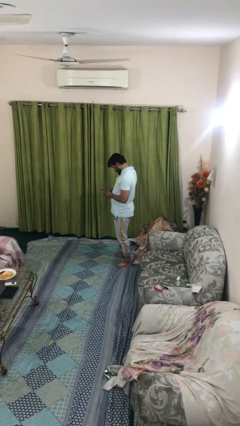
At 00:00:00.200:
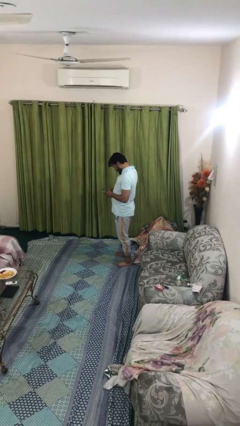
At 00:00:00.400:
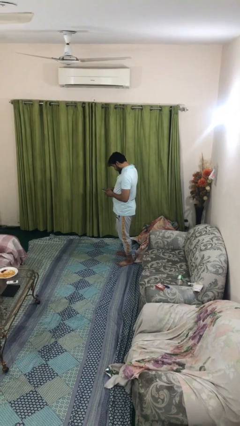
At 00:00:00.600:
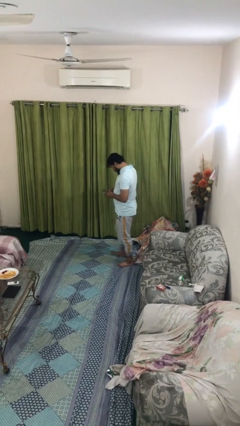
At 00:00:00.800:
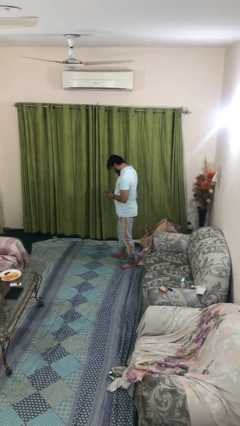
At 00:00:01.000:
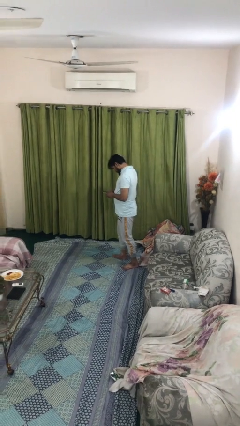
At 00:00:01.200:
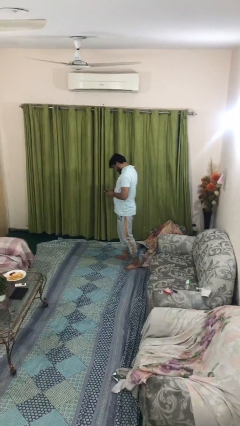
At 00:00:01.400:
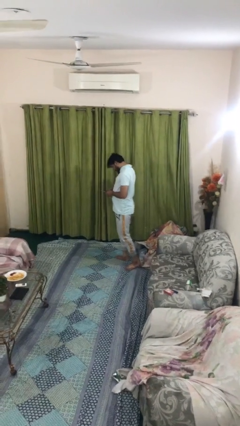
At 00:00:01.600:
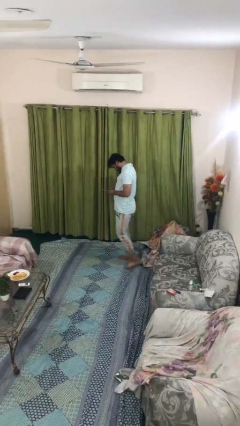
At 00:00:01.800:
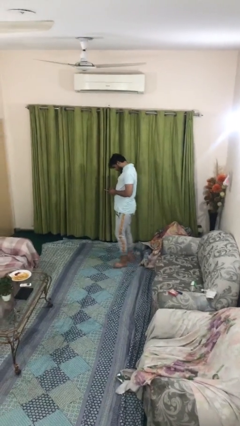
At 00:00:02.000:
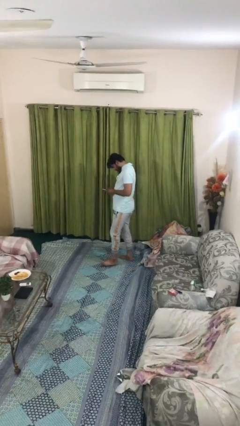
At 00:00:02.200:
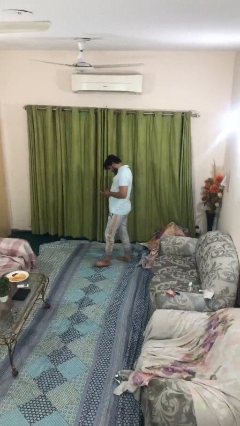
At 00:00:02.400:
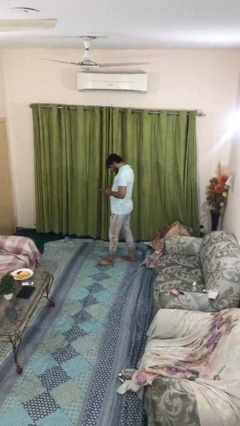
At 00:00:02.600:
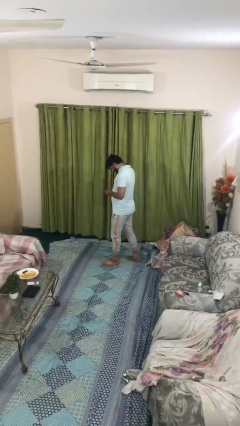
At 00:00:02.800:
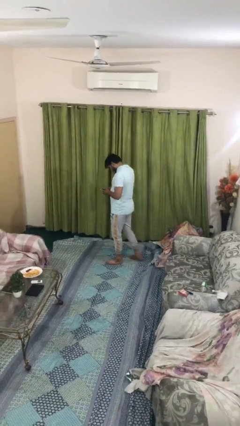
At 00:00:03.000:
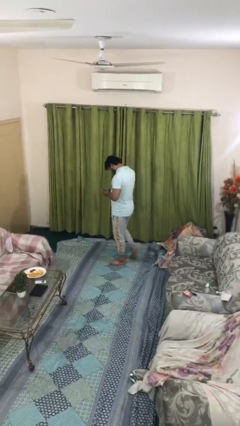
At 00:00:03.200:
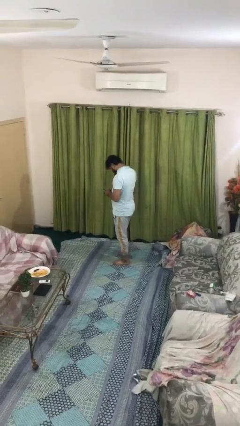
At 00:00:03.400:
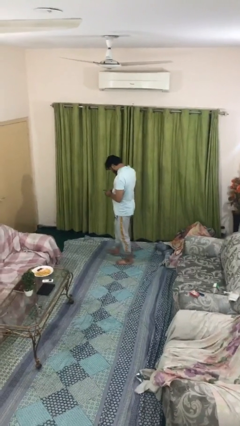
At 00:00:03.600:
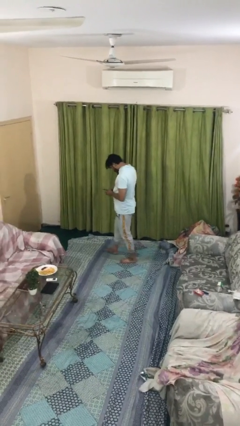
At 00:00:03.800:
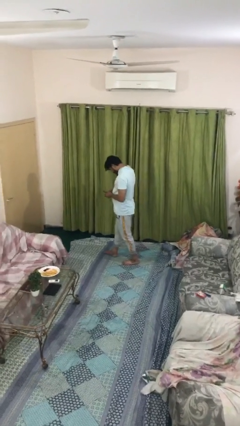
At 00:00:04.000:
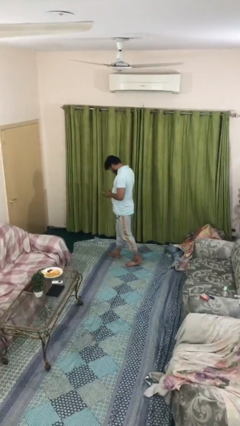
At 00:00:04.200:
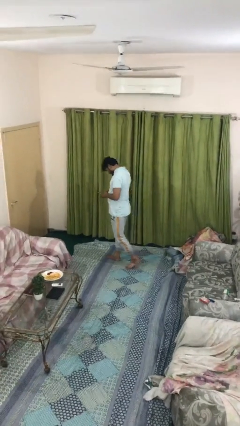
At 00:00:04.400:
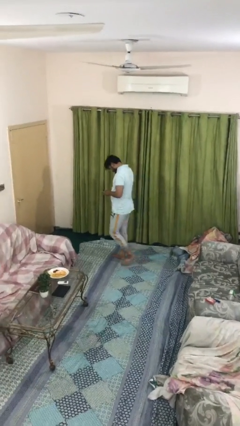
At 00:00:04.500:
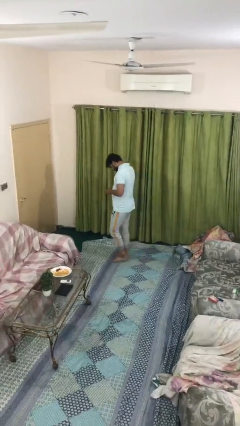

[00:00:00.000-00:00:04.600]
person texts on phone

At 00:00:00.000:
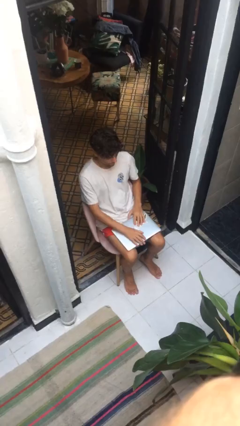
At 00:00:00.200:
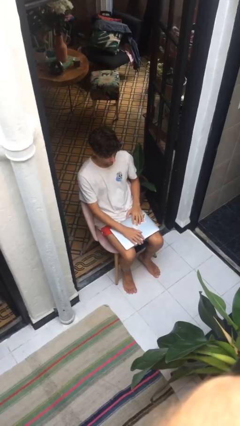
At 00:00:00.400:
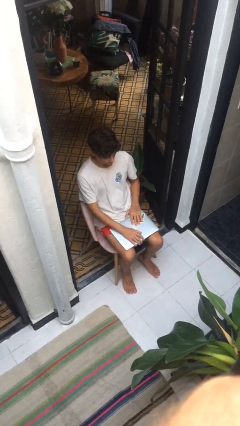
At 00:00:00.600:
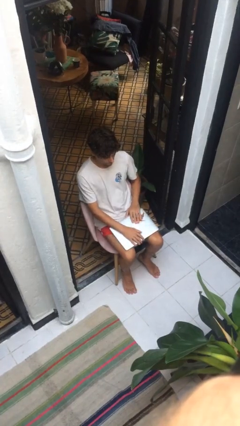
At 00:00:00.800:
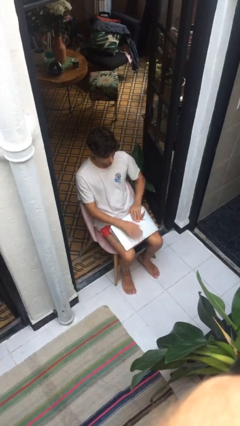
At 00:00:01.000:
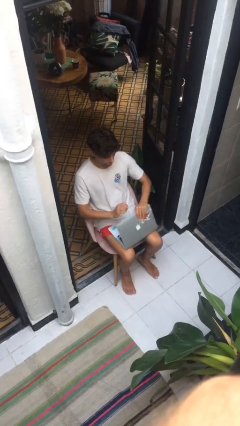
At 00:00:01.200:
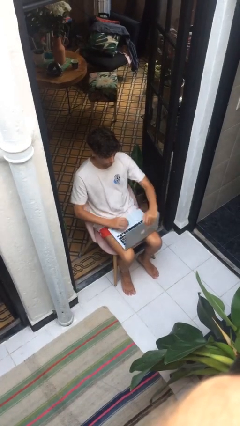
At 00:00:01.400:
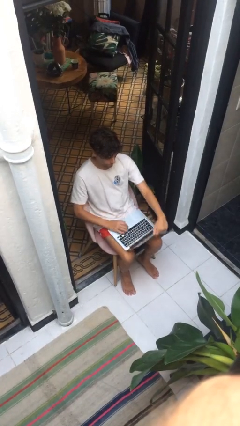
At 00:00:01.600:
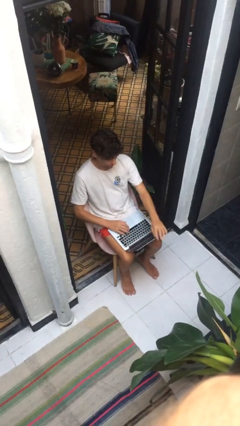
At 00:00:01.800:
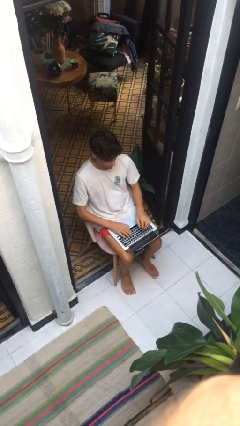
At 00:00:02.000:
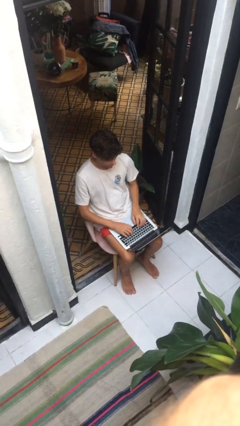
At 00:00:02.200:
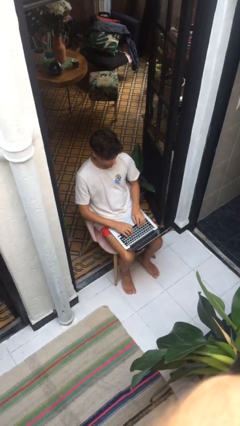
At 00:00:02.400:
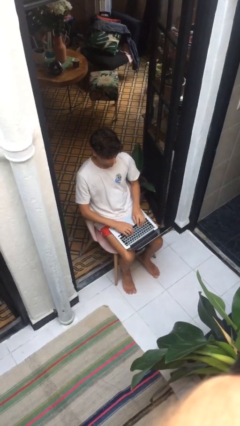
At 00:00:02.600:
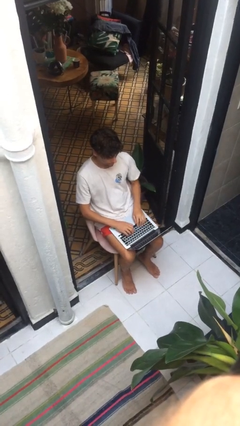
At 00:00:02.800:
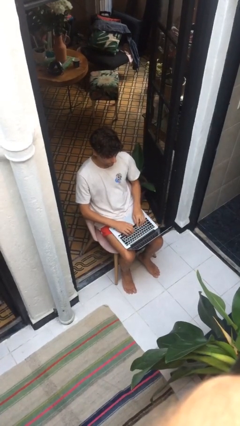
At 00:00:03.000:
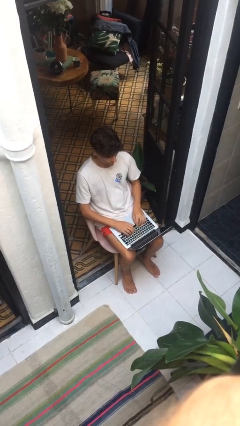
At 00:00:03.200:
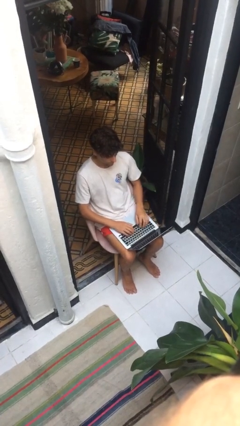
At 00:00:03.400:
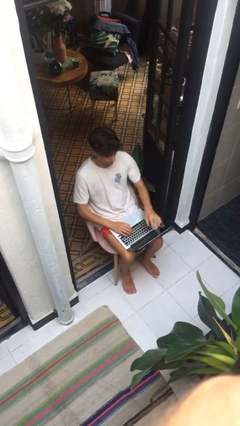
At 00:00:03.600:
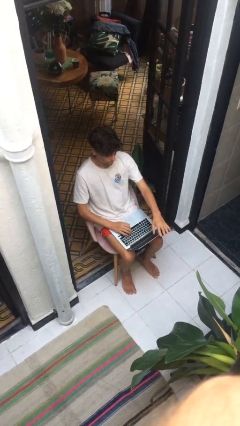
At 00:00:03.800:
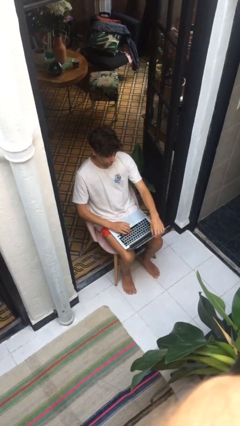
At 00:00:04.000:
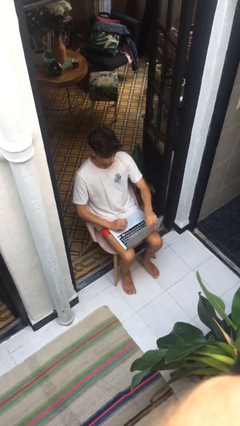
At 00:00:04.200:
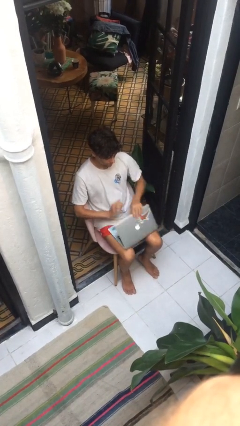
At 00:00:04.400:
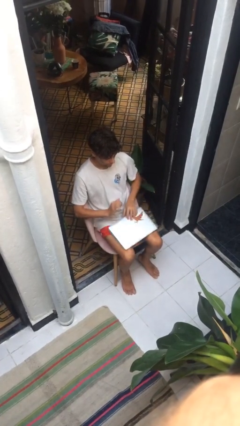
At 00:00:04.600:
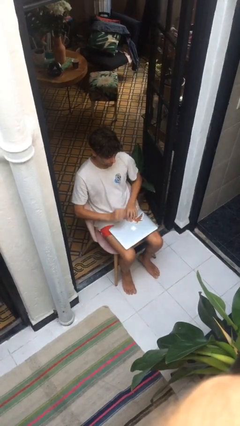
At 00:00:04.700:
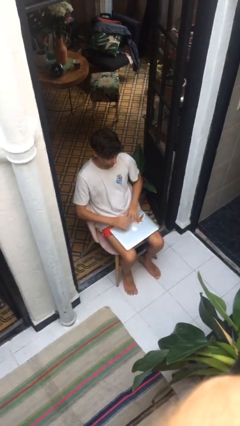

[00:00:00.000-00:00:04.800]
person interacts with laptop

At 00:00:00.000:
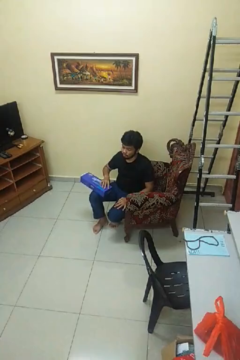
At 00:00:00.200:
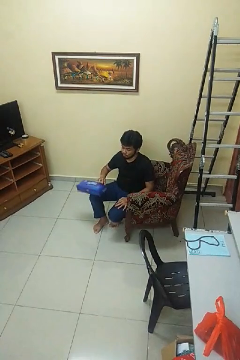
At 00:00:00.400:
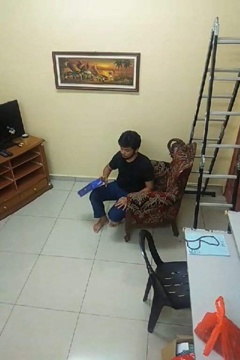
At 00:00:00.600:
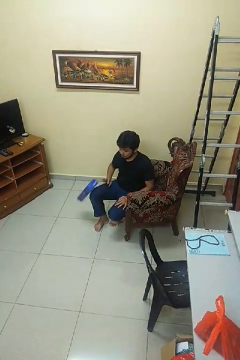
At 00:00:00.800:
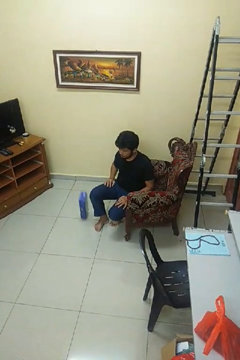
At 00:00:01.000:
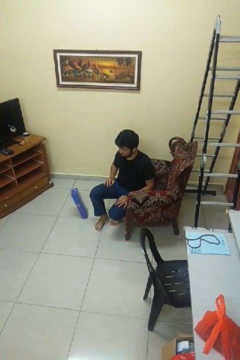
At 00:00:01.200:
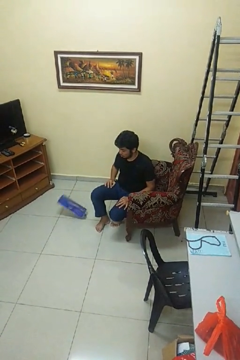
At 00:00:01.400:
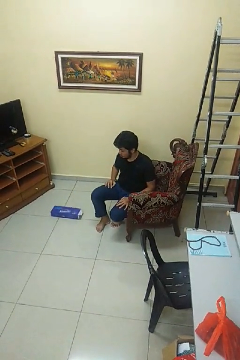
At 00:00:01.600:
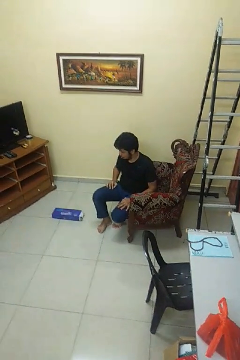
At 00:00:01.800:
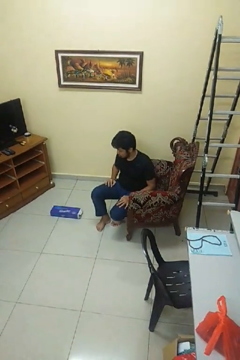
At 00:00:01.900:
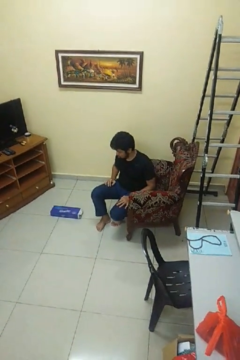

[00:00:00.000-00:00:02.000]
person drops object

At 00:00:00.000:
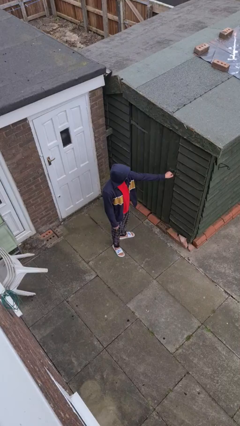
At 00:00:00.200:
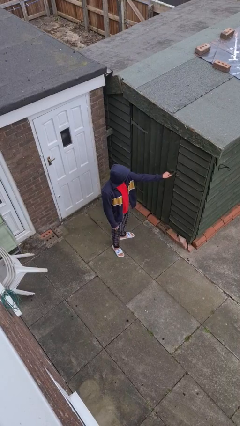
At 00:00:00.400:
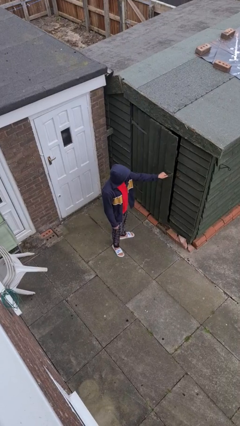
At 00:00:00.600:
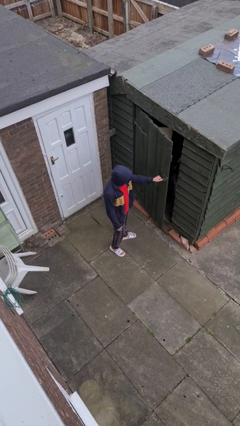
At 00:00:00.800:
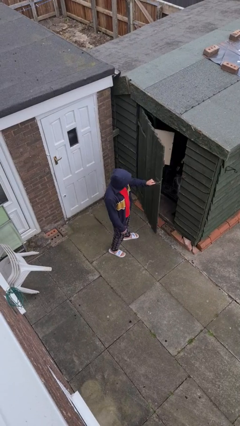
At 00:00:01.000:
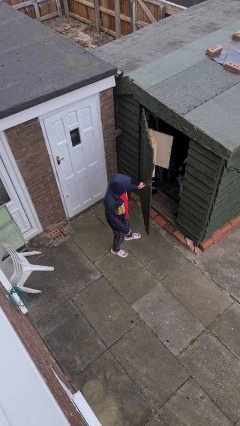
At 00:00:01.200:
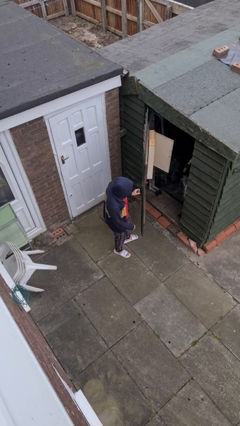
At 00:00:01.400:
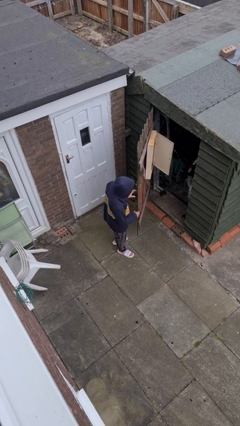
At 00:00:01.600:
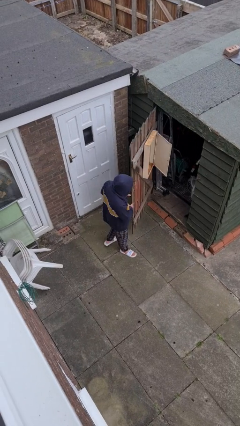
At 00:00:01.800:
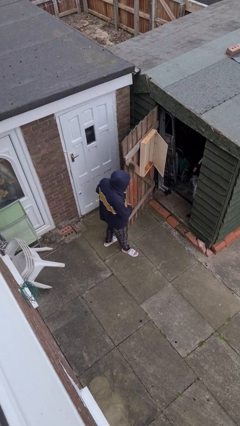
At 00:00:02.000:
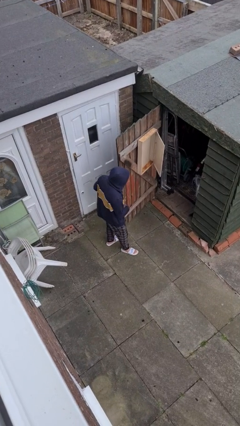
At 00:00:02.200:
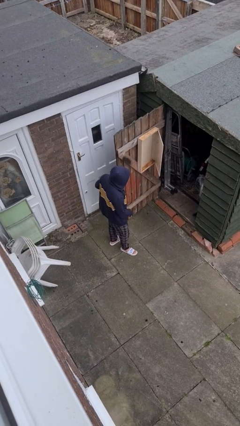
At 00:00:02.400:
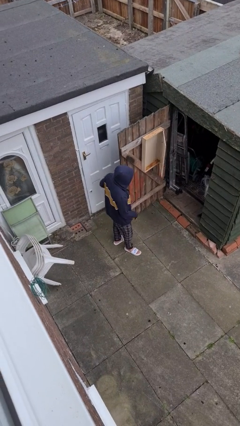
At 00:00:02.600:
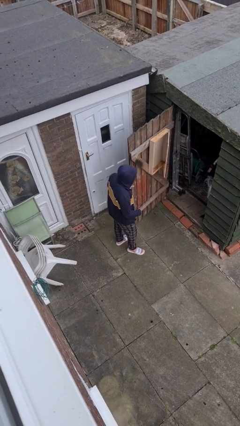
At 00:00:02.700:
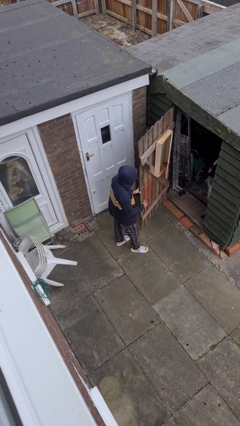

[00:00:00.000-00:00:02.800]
person opens facility door

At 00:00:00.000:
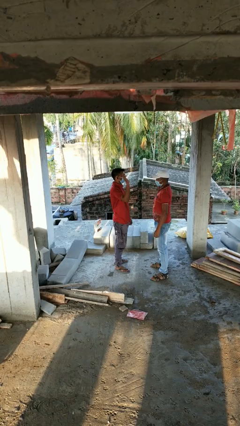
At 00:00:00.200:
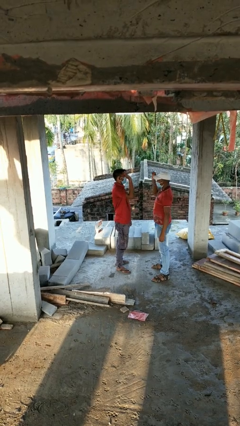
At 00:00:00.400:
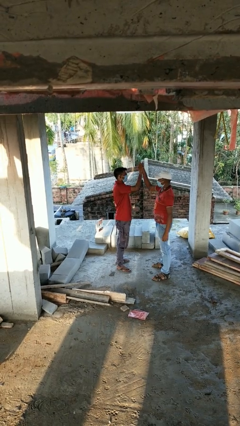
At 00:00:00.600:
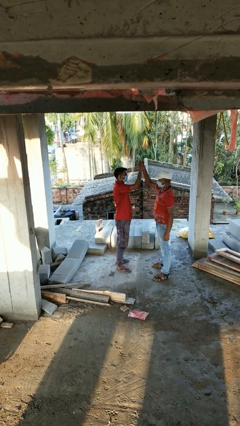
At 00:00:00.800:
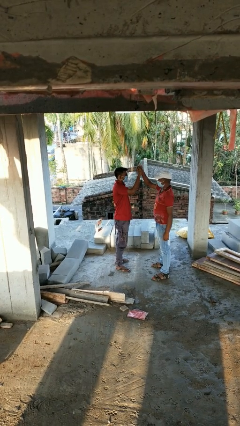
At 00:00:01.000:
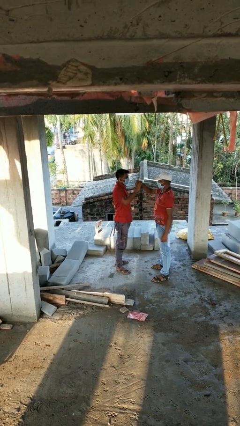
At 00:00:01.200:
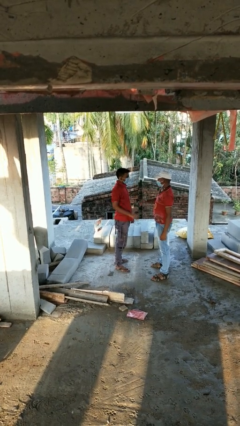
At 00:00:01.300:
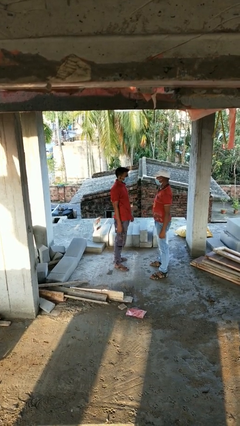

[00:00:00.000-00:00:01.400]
person highfives hand

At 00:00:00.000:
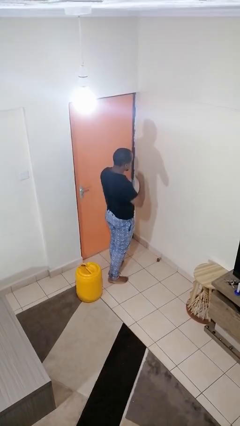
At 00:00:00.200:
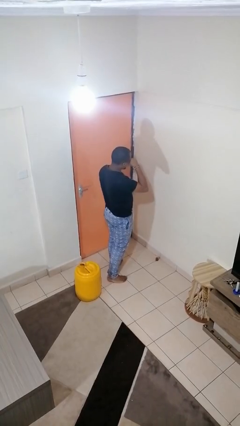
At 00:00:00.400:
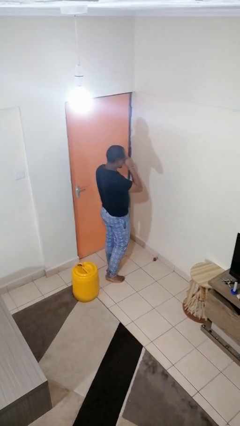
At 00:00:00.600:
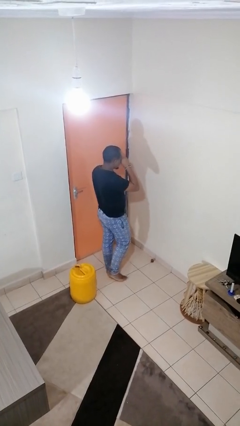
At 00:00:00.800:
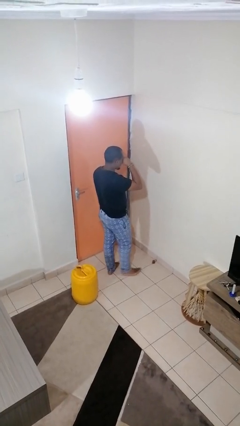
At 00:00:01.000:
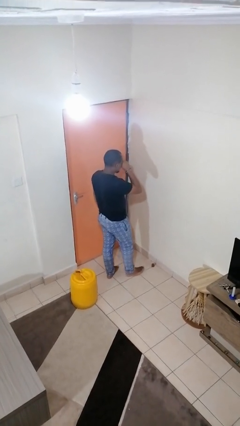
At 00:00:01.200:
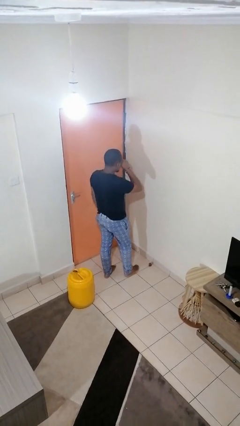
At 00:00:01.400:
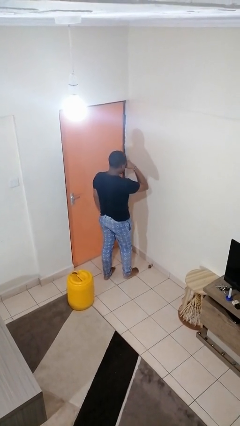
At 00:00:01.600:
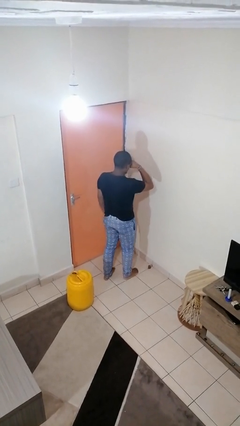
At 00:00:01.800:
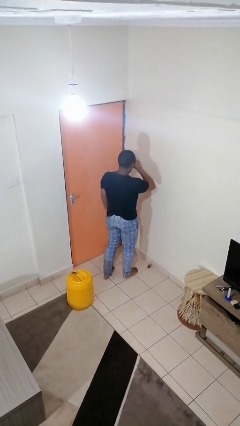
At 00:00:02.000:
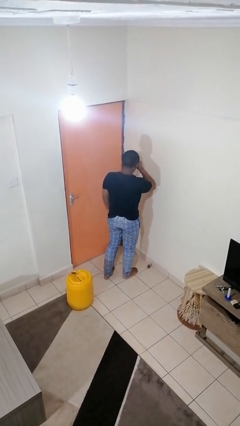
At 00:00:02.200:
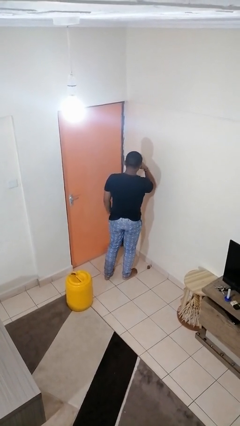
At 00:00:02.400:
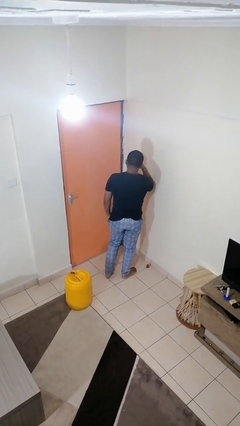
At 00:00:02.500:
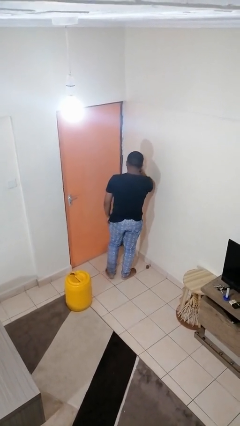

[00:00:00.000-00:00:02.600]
person rubs eyes
